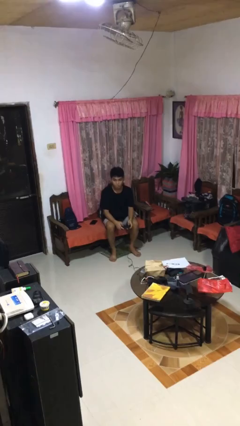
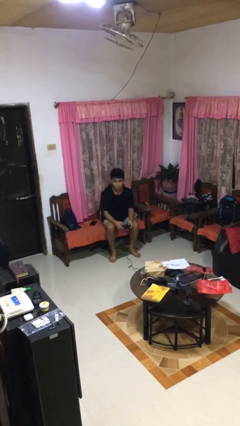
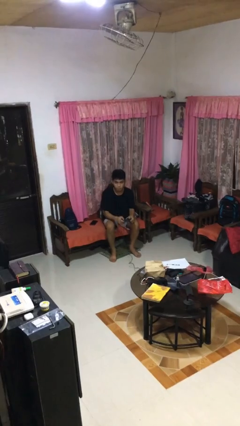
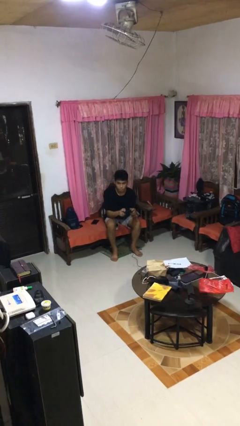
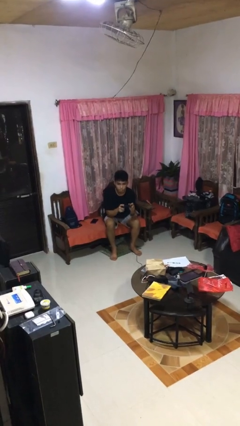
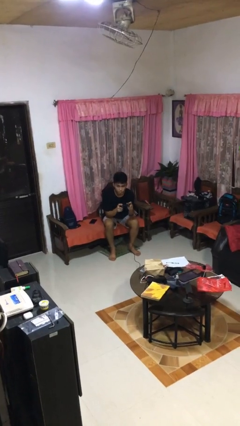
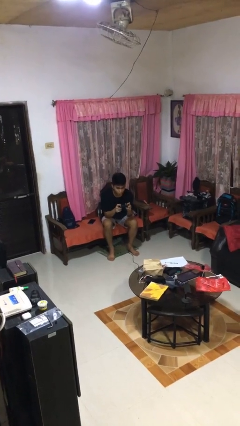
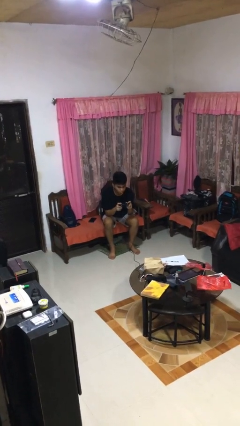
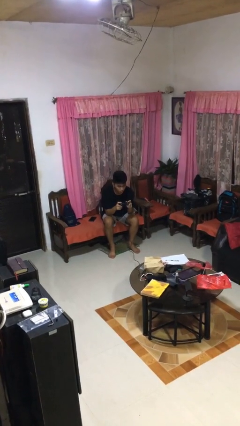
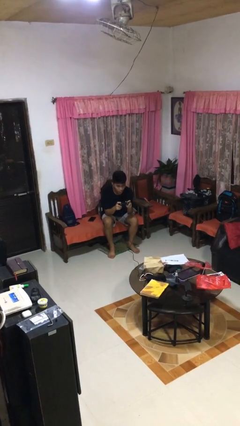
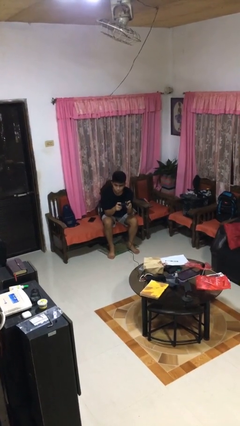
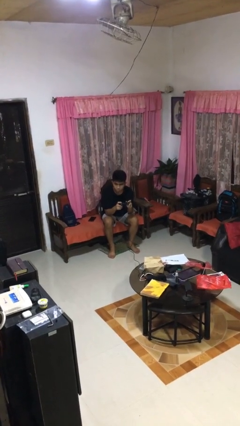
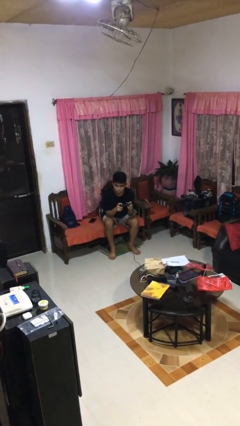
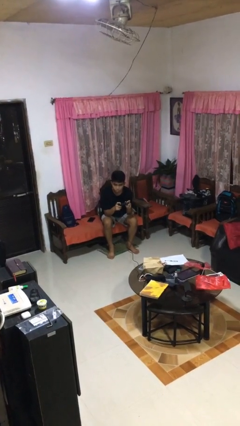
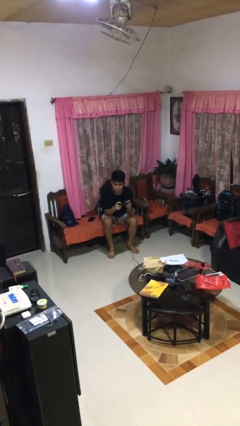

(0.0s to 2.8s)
person interacts with handheld game

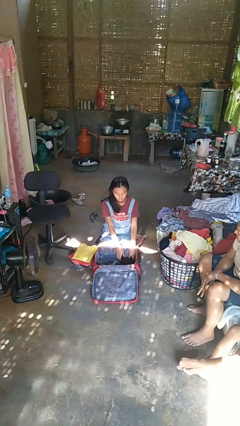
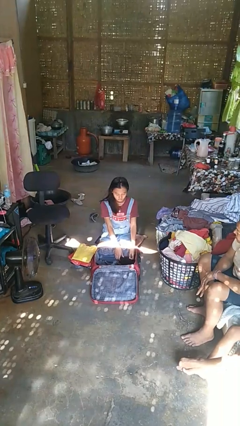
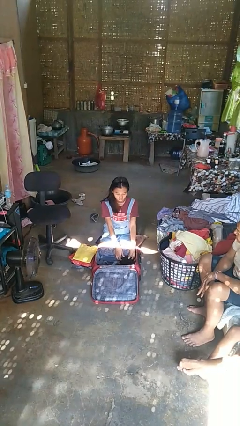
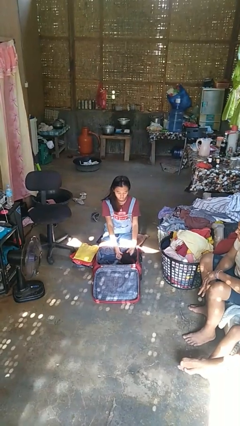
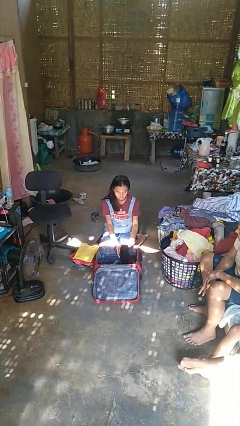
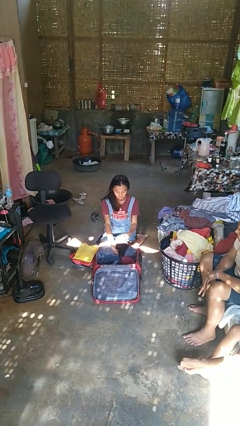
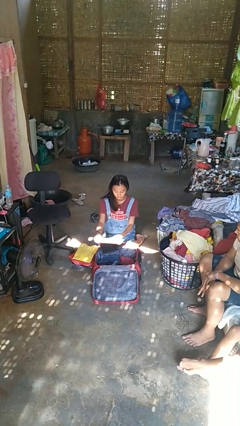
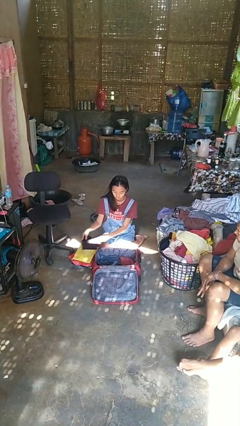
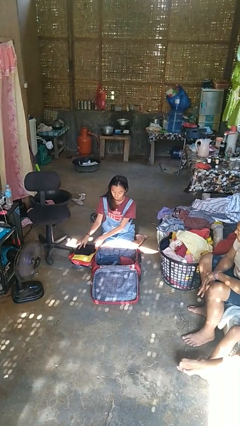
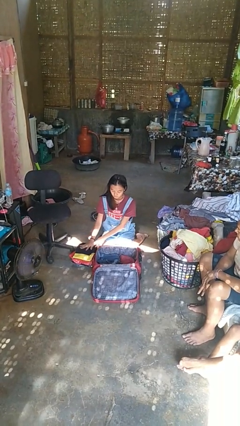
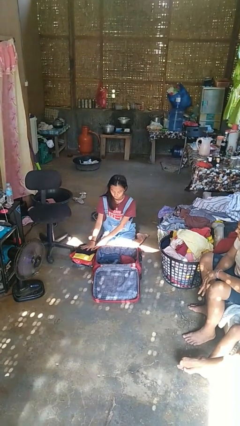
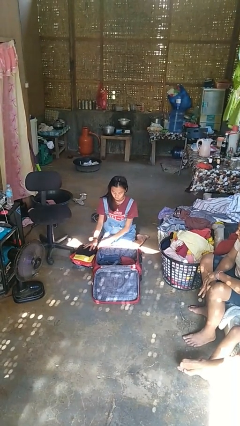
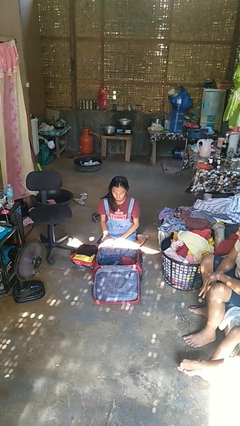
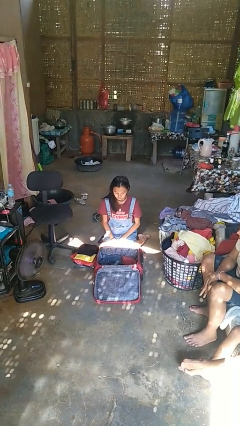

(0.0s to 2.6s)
person unloads clothes from suitcase

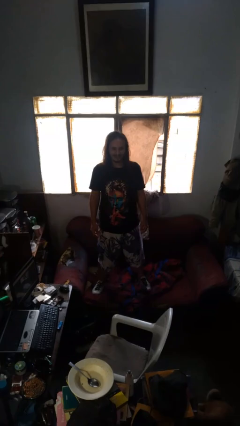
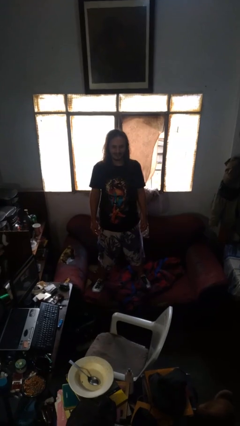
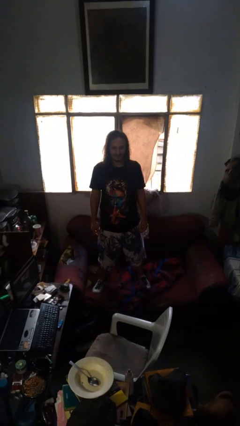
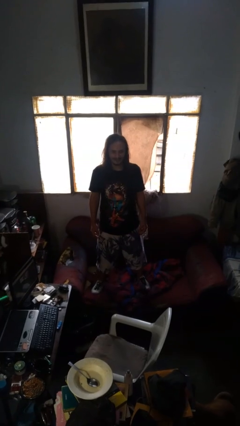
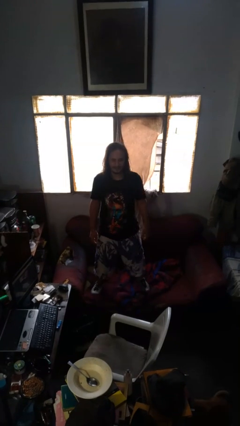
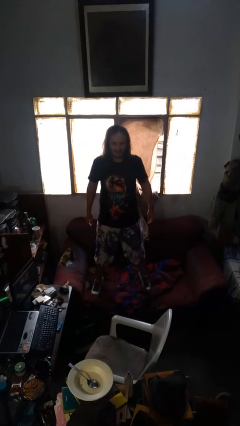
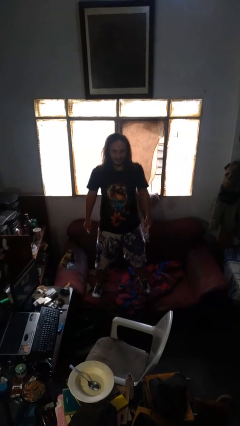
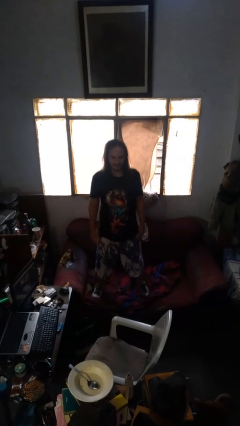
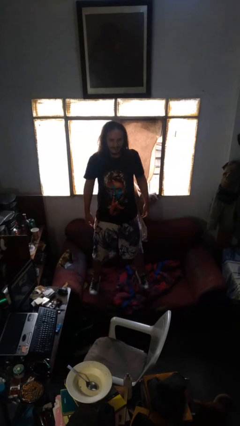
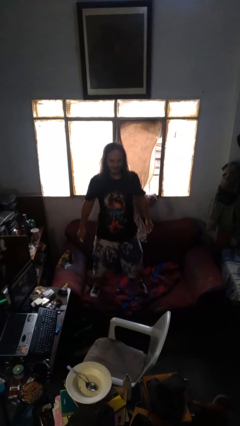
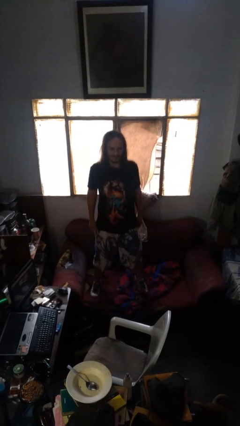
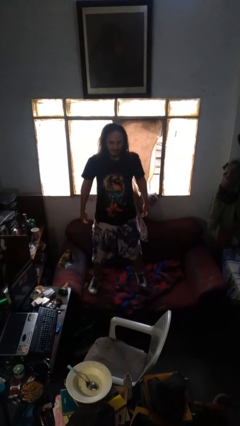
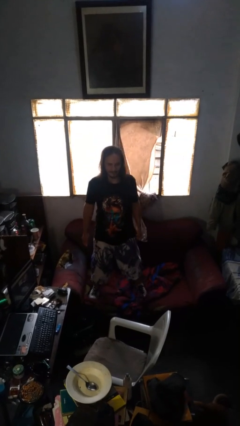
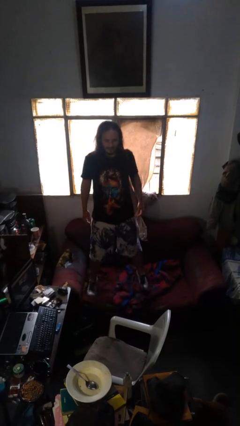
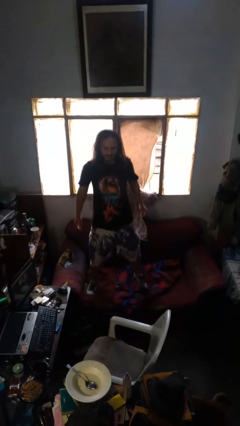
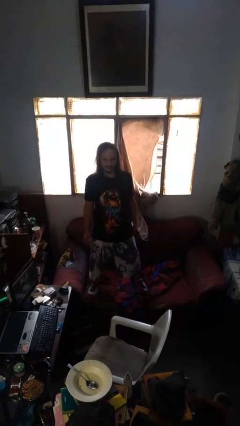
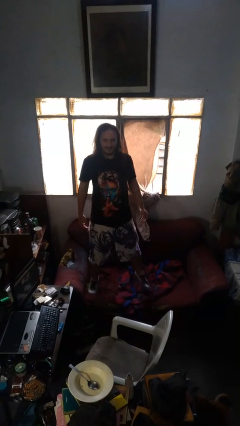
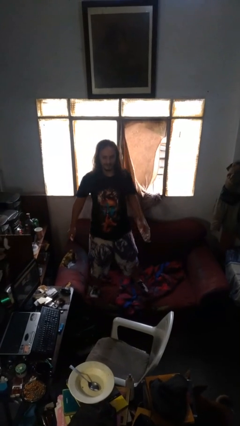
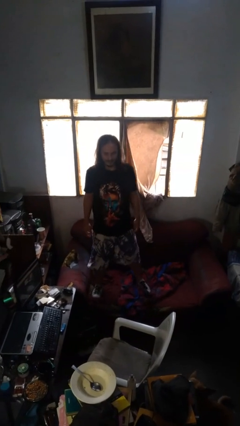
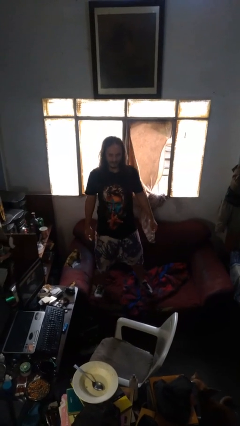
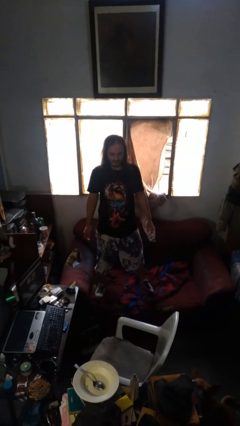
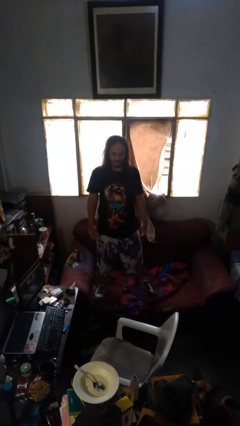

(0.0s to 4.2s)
person jumps on couch

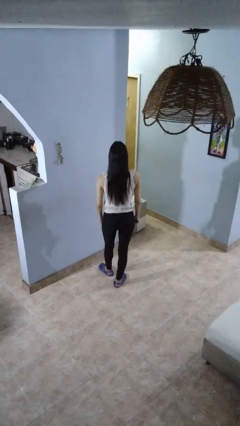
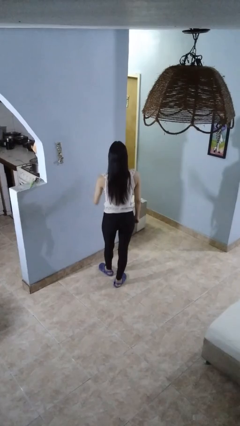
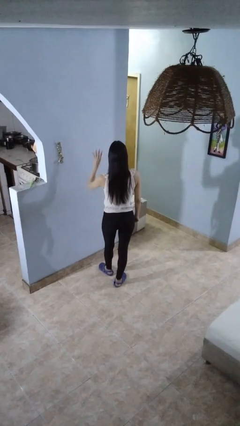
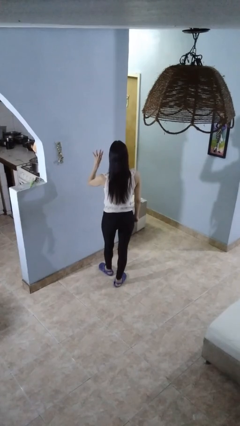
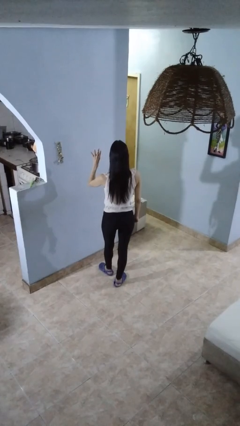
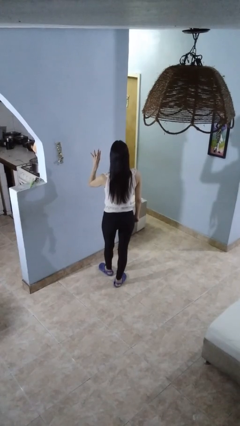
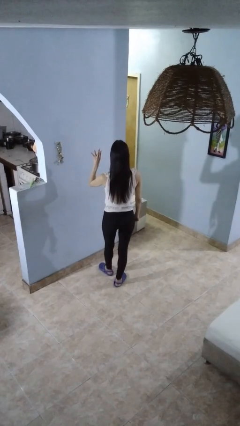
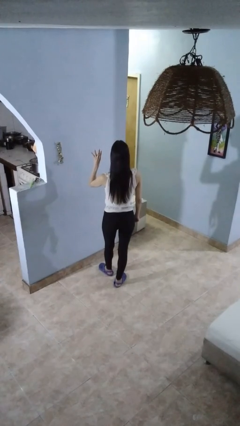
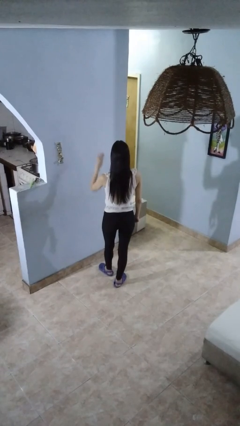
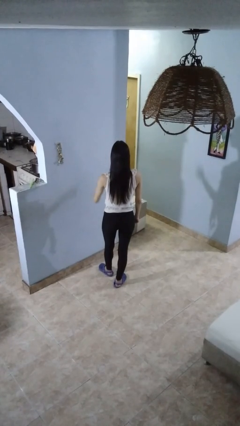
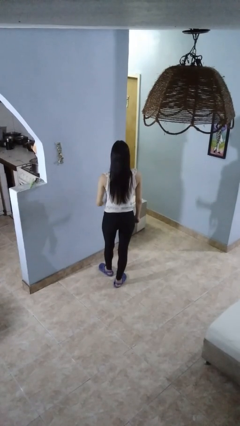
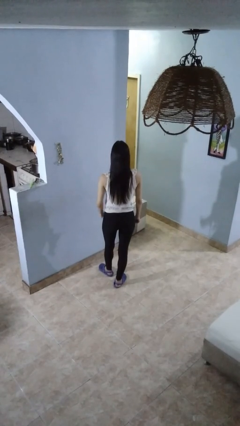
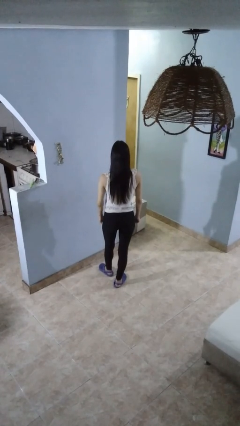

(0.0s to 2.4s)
person gestures number four

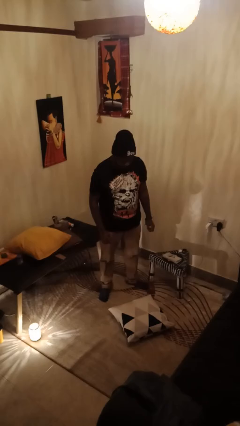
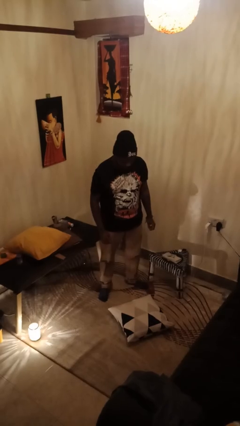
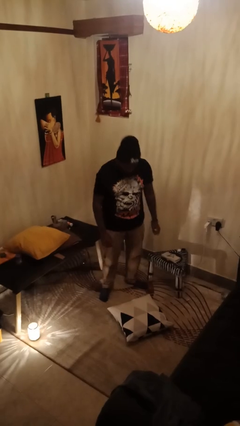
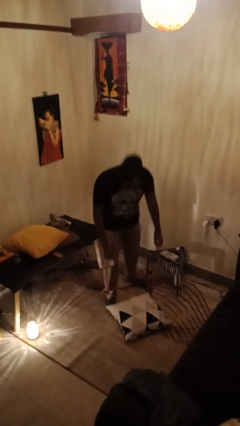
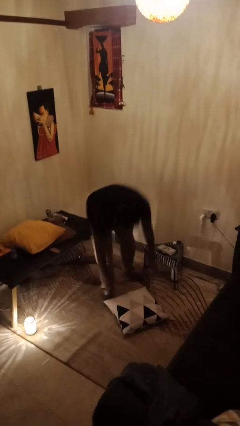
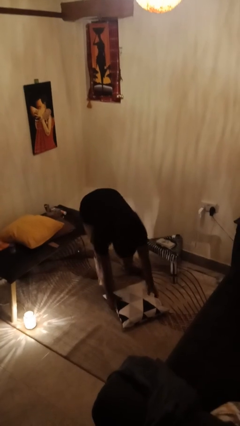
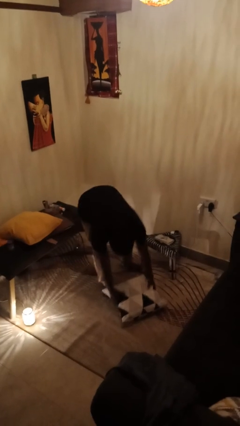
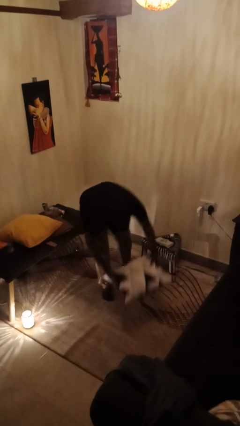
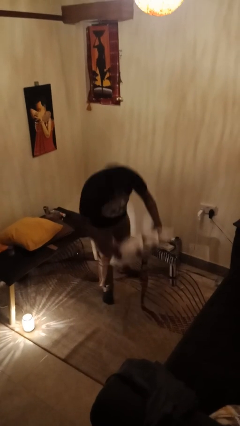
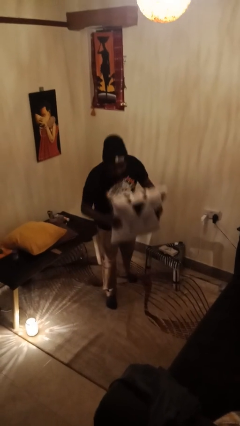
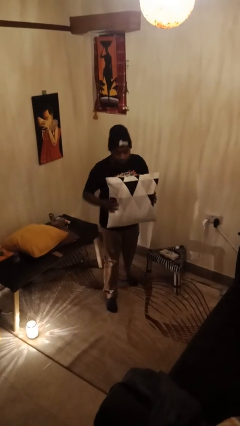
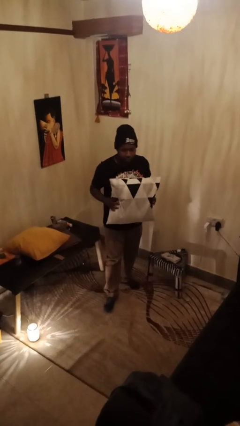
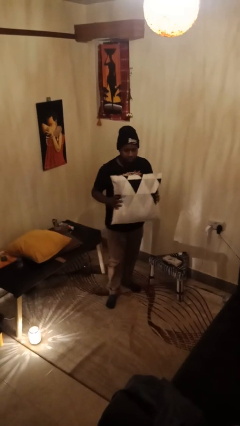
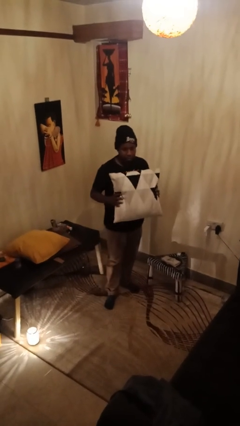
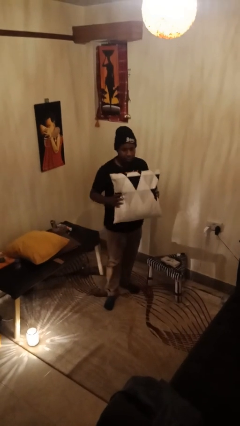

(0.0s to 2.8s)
person picks up object from floor

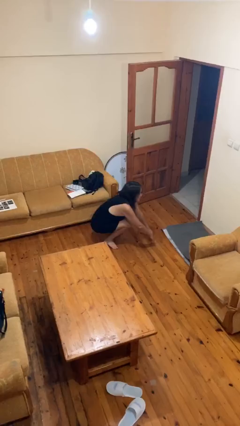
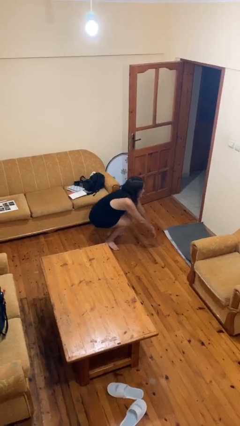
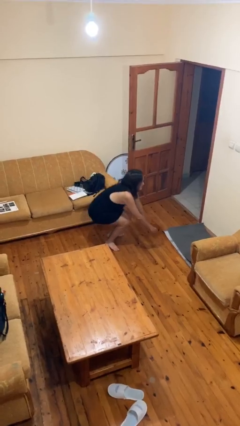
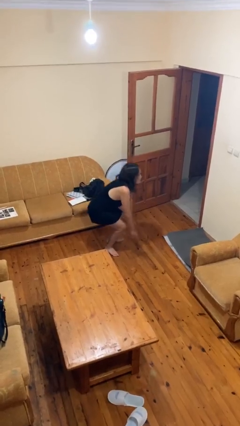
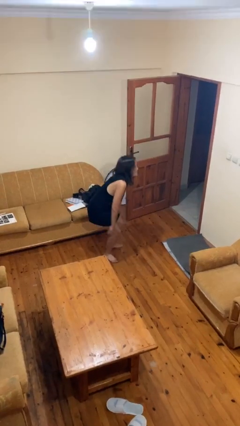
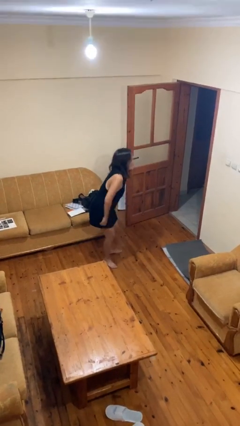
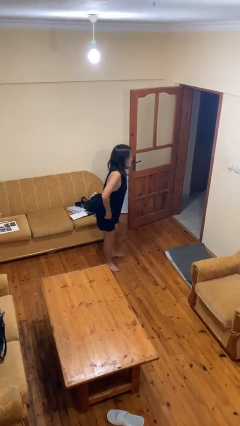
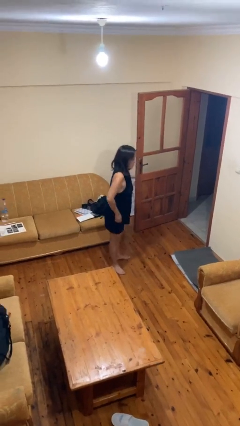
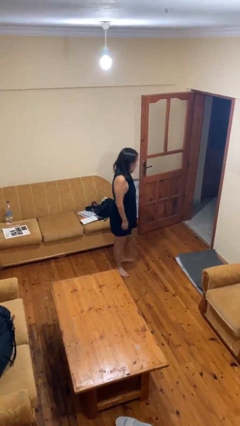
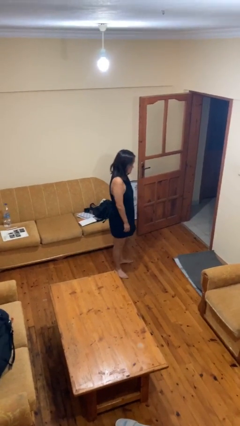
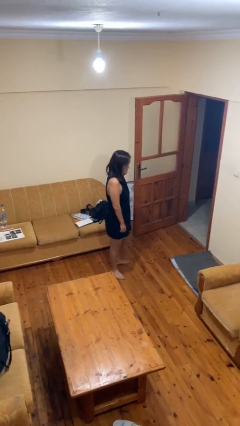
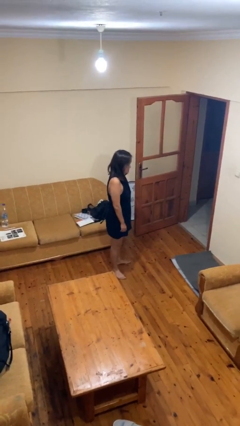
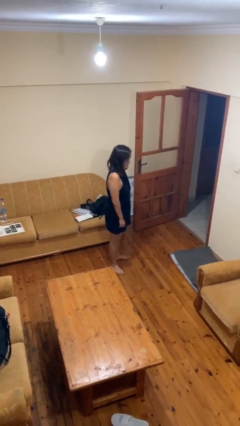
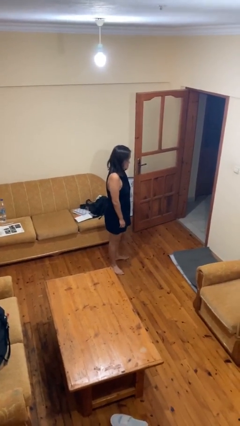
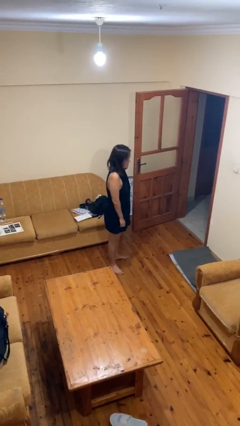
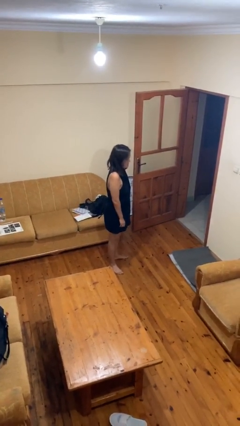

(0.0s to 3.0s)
person stands up
